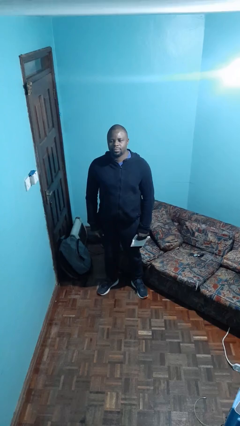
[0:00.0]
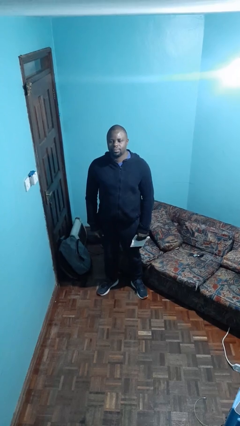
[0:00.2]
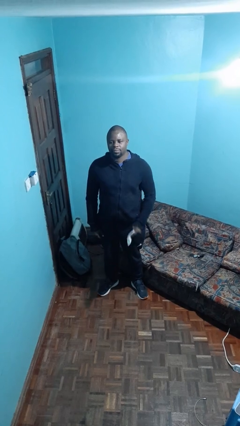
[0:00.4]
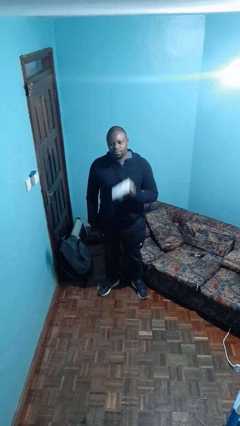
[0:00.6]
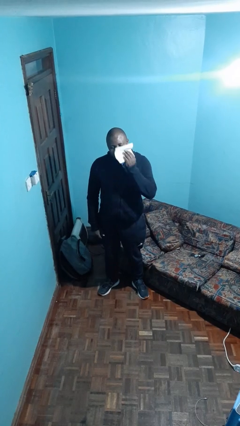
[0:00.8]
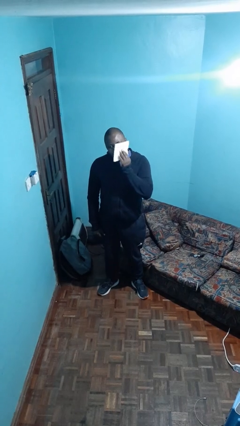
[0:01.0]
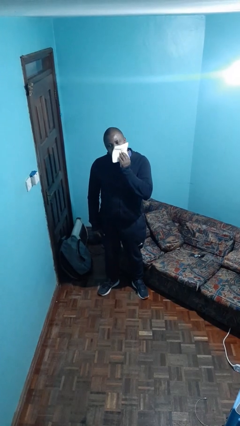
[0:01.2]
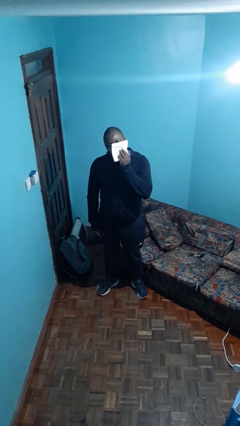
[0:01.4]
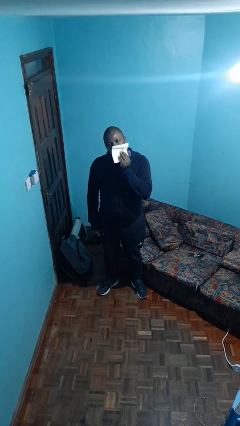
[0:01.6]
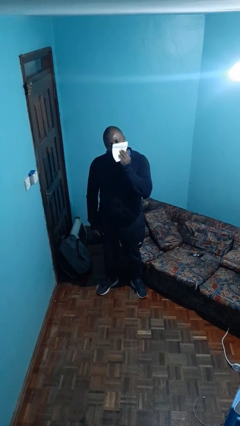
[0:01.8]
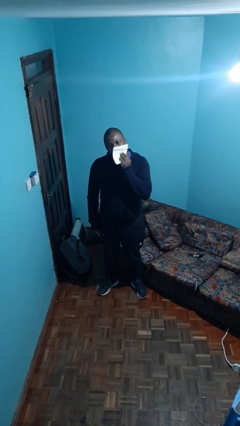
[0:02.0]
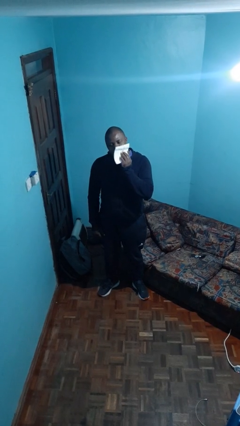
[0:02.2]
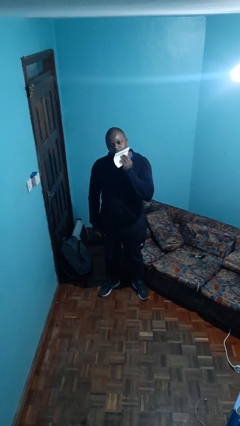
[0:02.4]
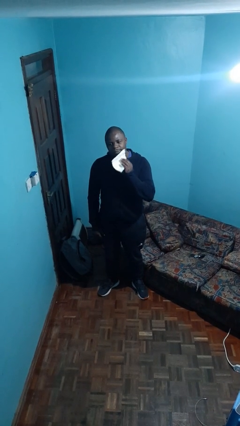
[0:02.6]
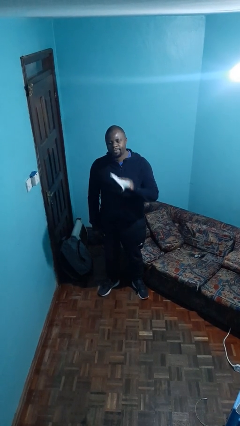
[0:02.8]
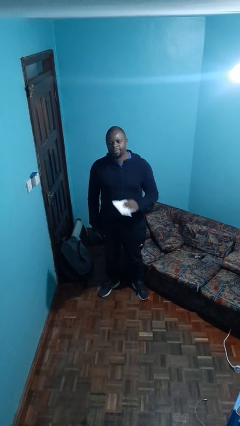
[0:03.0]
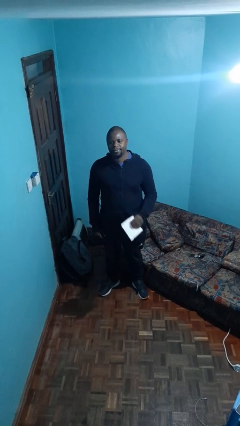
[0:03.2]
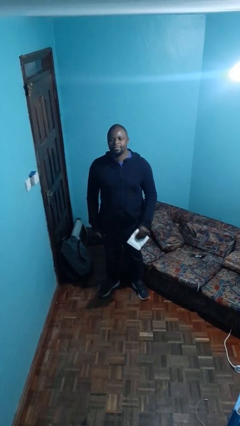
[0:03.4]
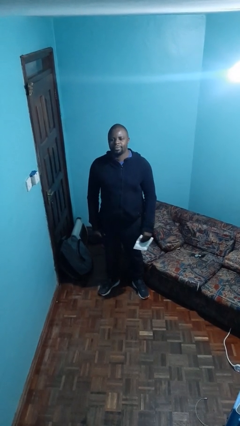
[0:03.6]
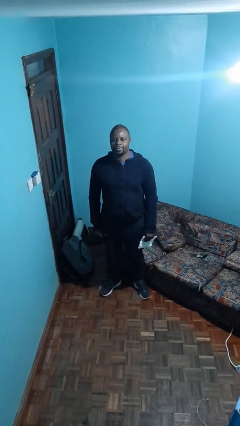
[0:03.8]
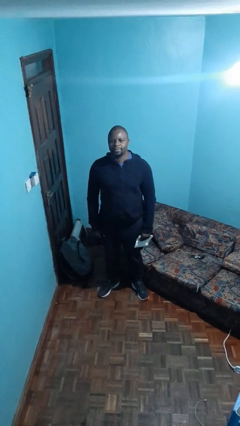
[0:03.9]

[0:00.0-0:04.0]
person wipes mouth with napkin

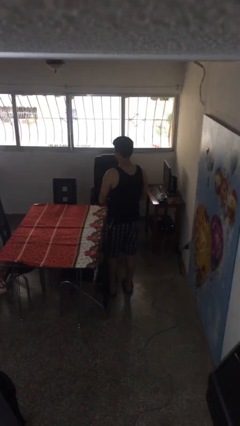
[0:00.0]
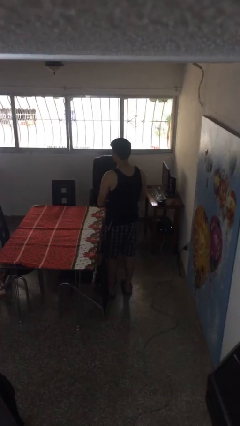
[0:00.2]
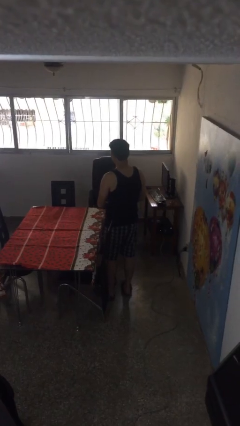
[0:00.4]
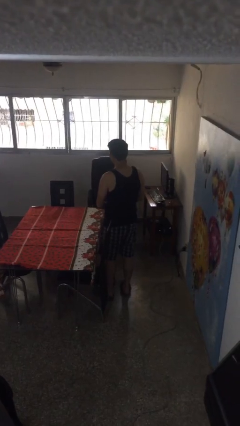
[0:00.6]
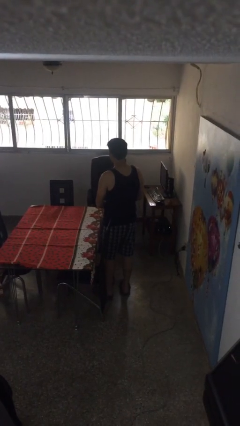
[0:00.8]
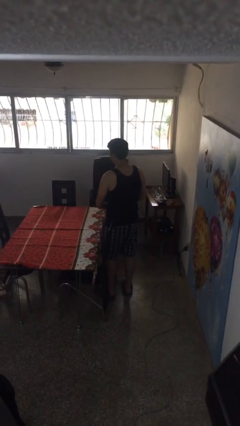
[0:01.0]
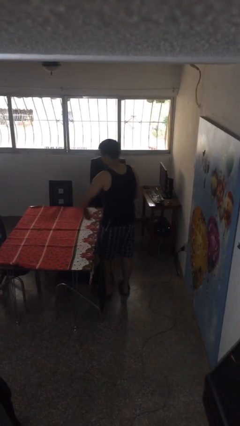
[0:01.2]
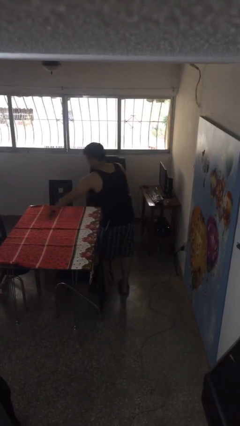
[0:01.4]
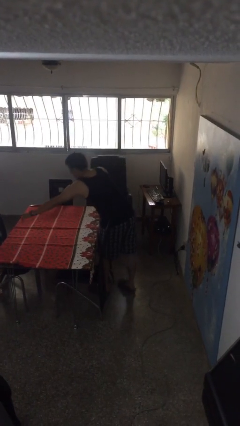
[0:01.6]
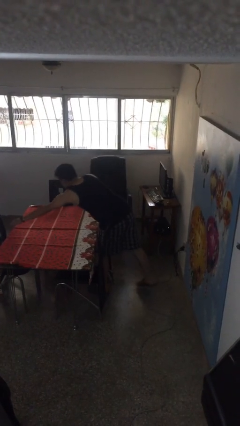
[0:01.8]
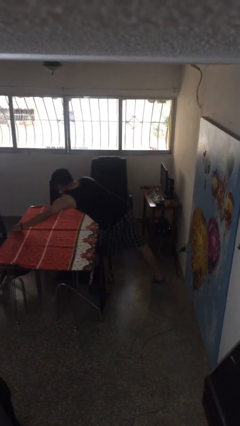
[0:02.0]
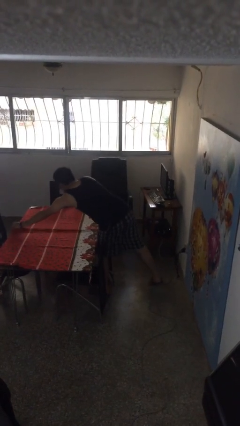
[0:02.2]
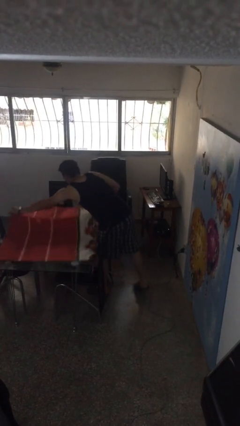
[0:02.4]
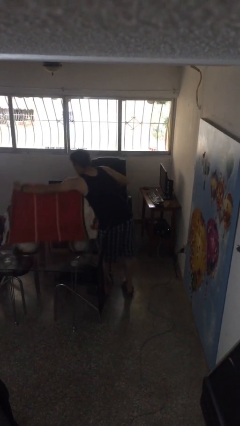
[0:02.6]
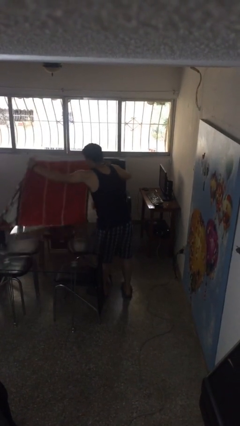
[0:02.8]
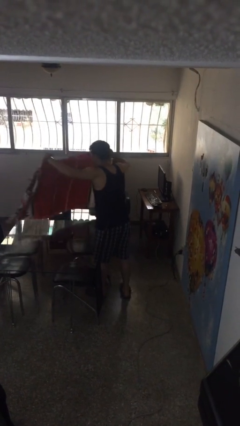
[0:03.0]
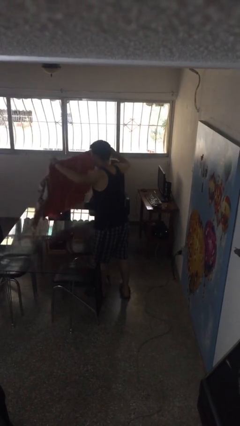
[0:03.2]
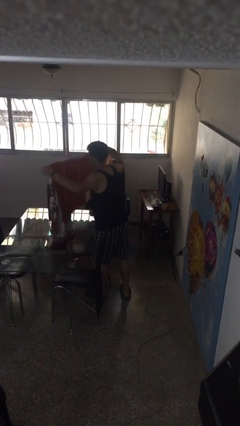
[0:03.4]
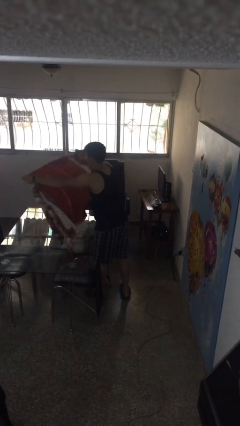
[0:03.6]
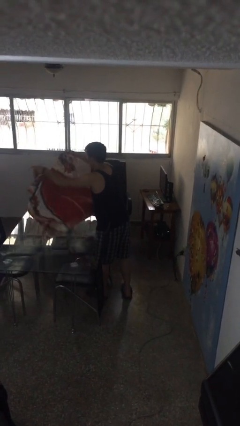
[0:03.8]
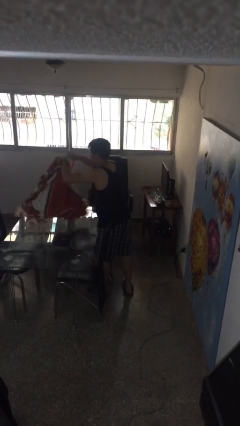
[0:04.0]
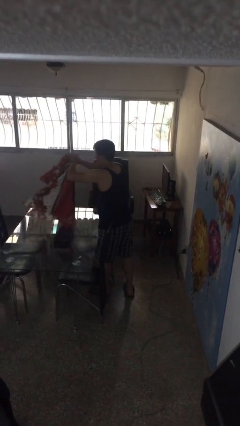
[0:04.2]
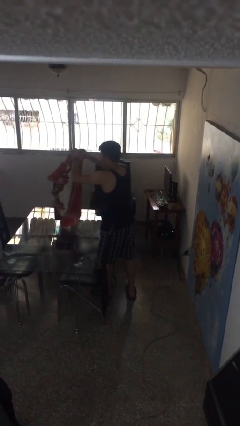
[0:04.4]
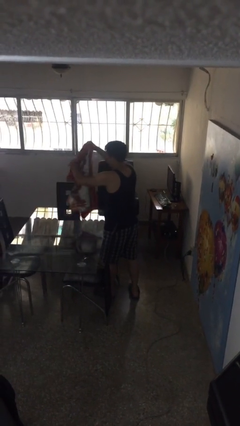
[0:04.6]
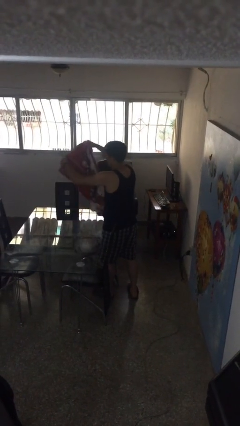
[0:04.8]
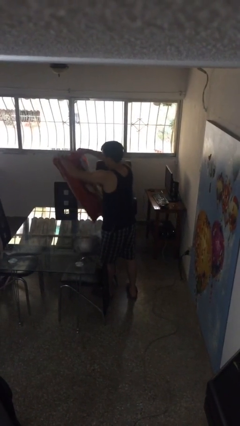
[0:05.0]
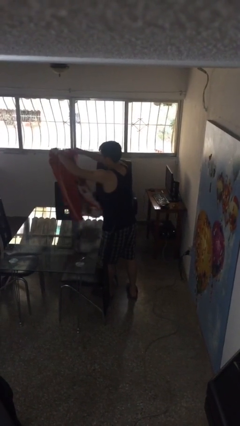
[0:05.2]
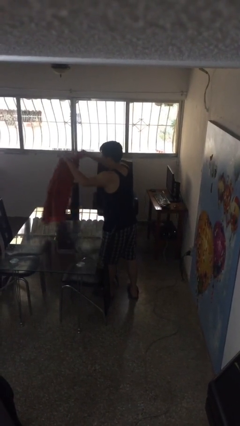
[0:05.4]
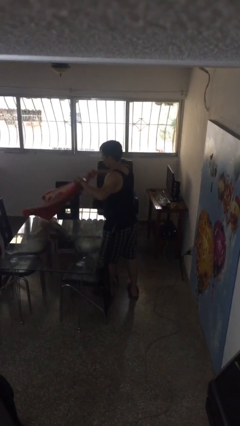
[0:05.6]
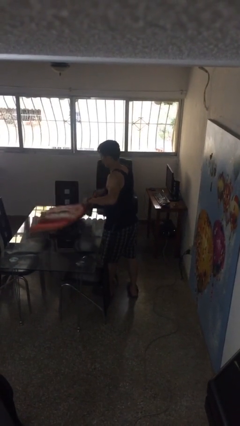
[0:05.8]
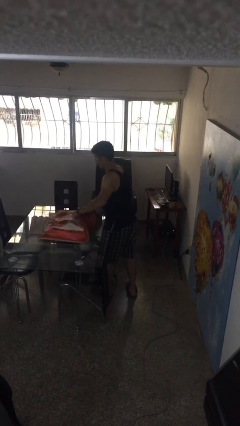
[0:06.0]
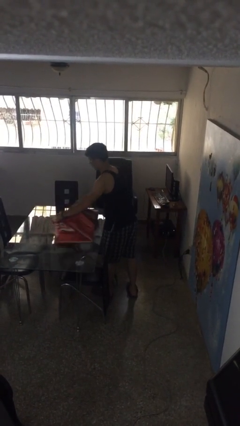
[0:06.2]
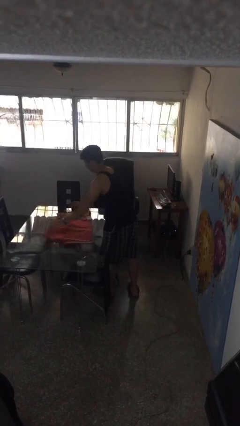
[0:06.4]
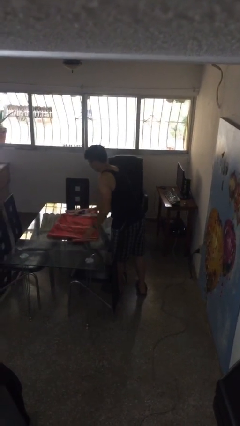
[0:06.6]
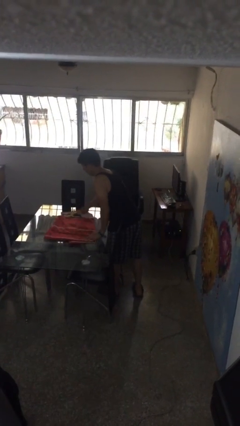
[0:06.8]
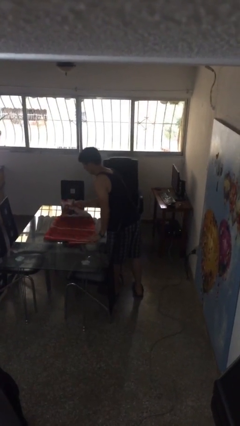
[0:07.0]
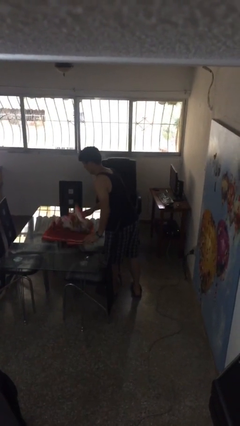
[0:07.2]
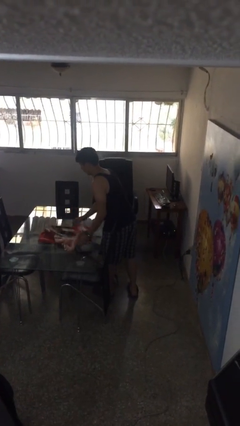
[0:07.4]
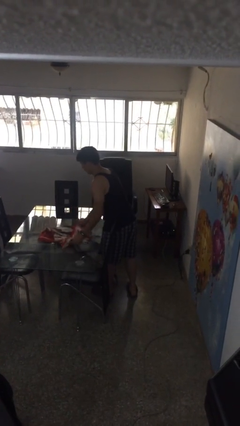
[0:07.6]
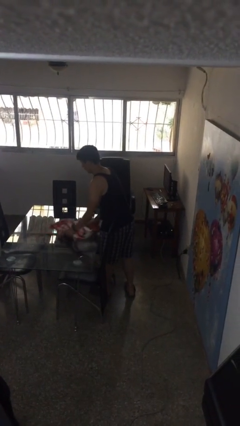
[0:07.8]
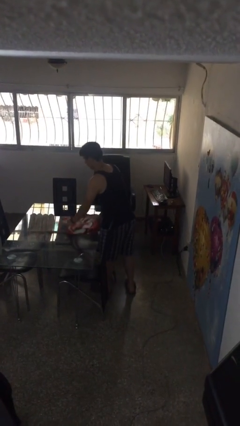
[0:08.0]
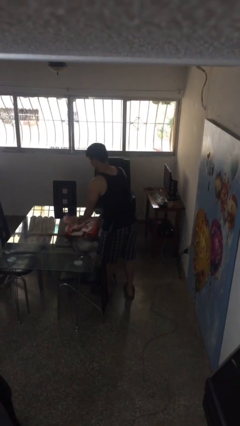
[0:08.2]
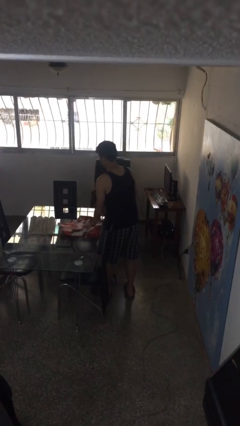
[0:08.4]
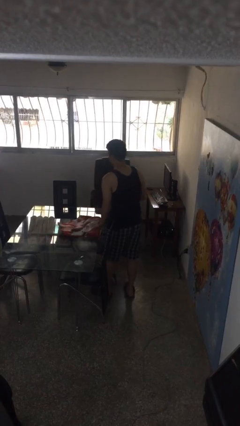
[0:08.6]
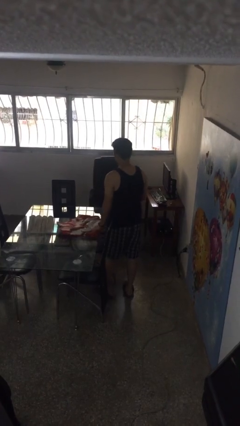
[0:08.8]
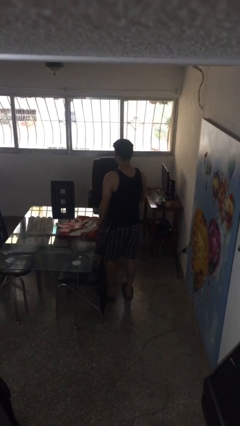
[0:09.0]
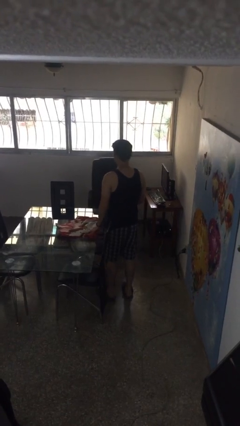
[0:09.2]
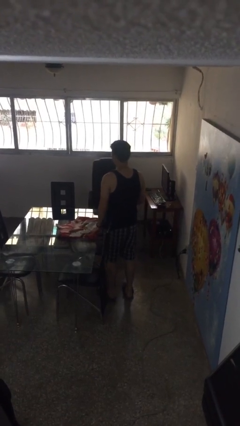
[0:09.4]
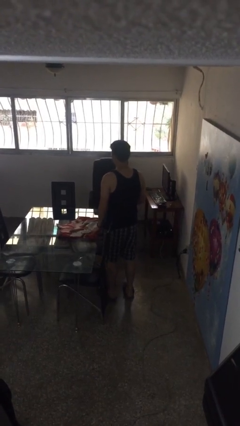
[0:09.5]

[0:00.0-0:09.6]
person folds tablecloth

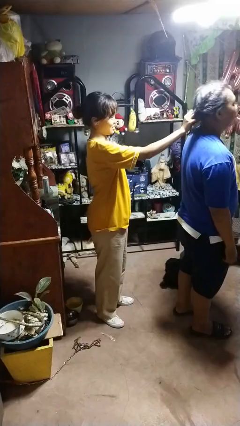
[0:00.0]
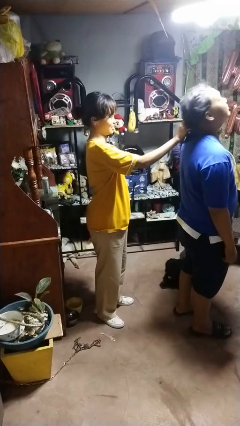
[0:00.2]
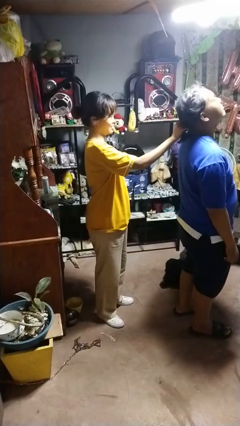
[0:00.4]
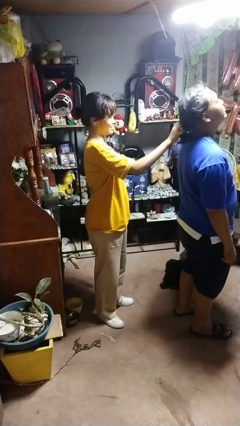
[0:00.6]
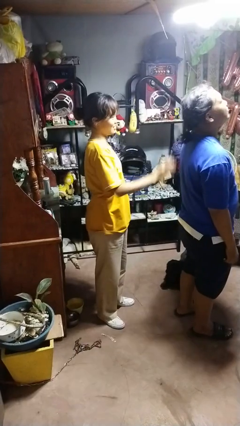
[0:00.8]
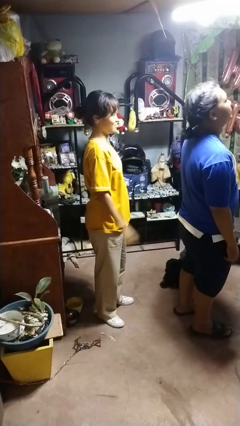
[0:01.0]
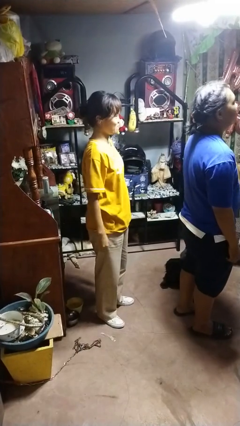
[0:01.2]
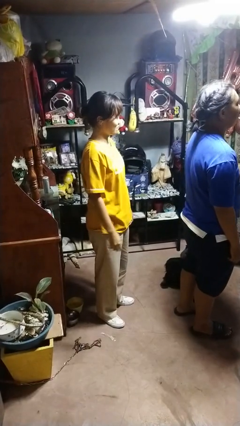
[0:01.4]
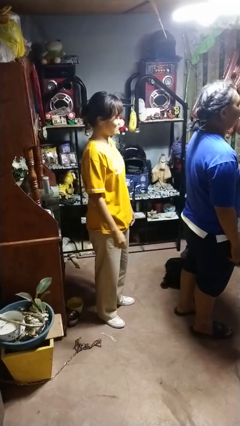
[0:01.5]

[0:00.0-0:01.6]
person grabs person by hair

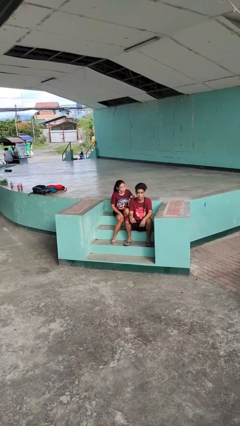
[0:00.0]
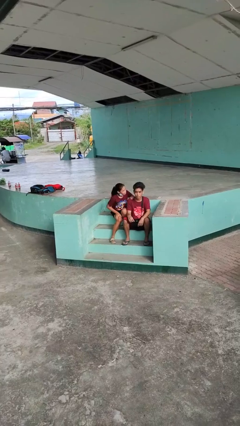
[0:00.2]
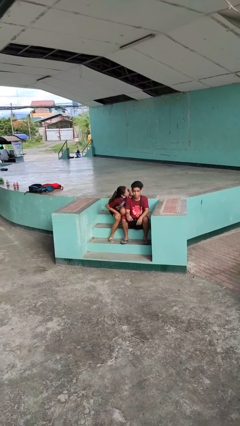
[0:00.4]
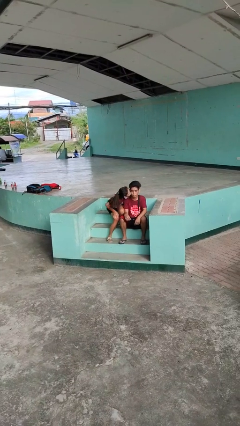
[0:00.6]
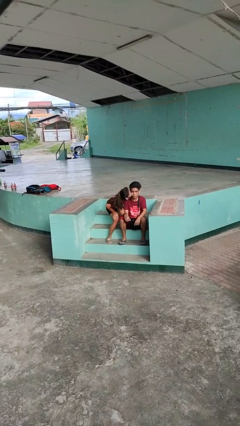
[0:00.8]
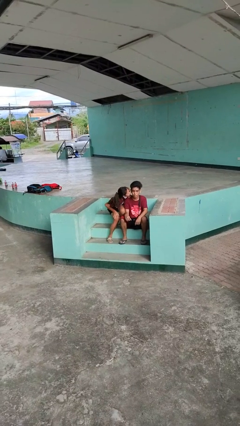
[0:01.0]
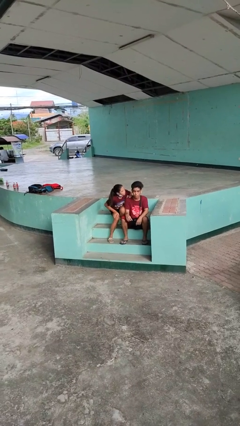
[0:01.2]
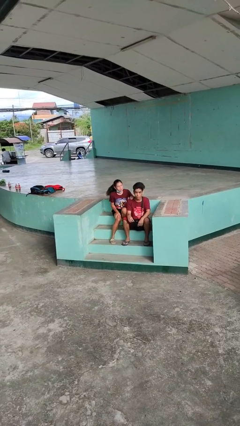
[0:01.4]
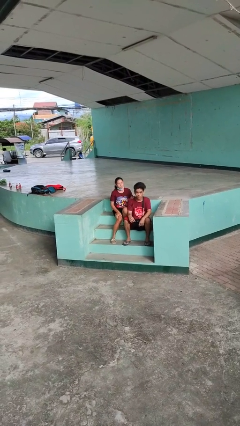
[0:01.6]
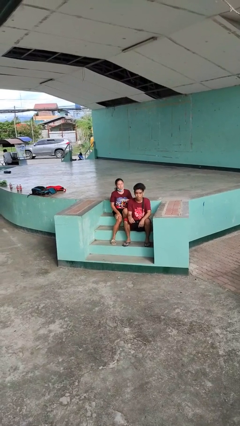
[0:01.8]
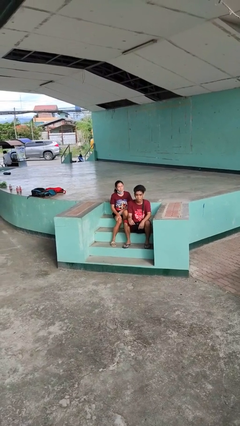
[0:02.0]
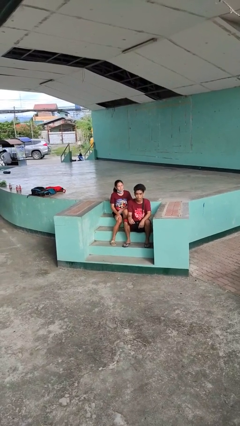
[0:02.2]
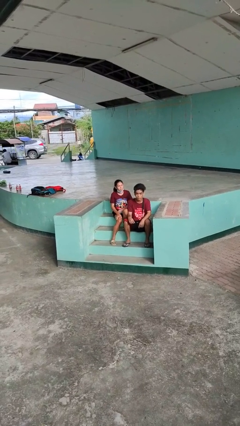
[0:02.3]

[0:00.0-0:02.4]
person kisses cheek of person
